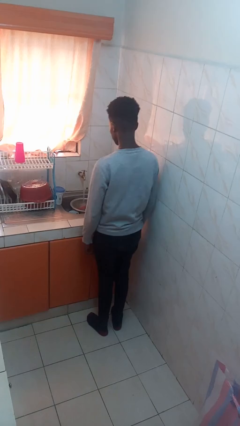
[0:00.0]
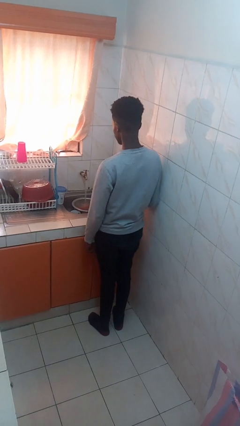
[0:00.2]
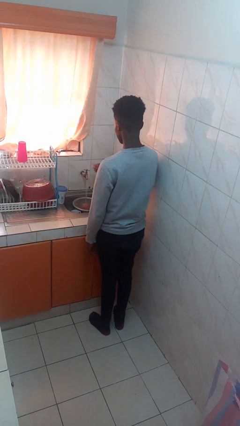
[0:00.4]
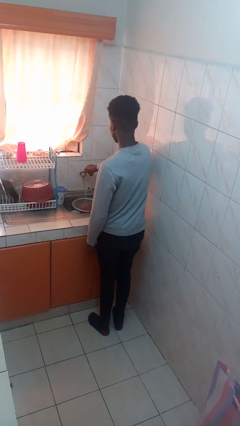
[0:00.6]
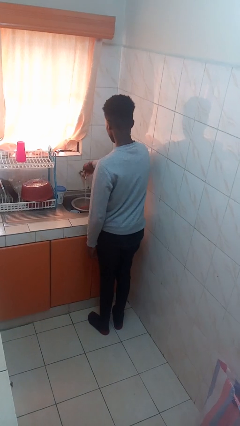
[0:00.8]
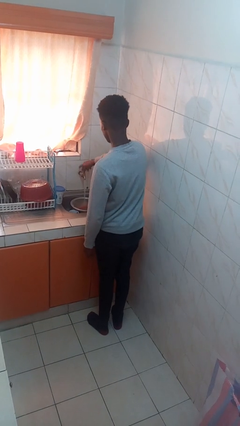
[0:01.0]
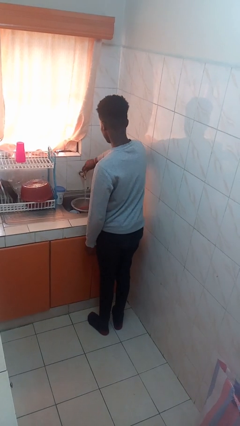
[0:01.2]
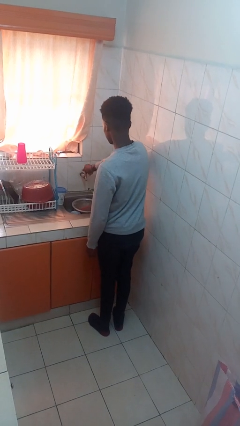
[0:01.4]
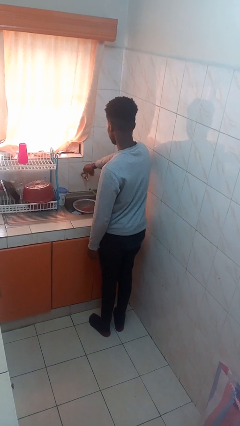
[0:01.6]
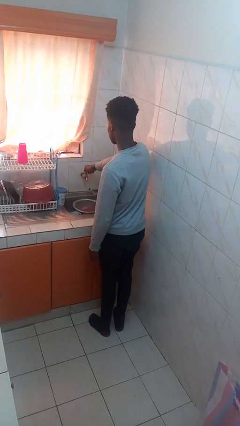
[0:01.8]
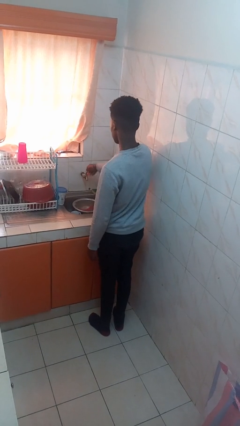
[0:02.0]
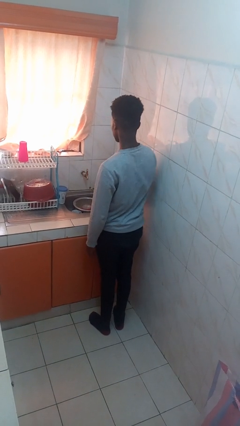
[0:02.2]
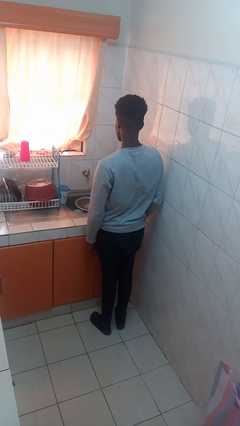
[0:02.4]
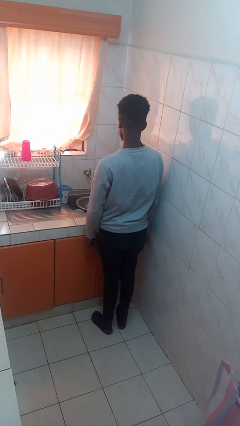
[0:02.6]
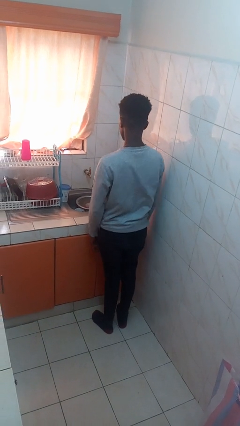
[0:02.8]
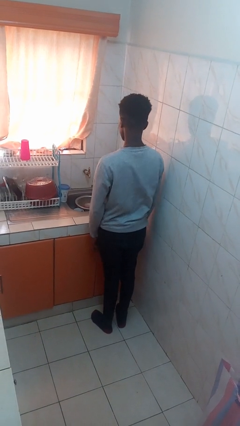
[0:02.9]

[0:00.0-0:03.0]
person turns off faucet

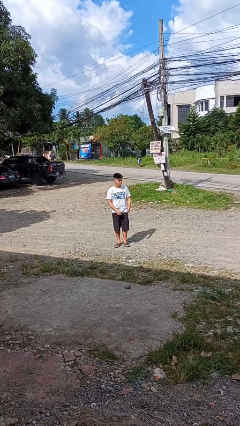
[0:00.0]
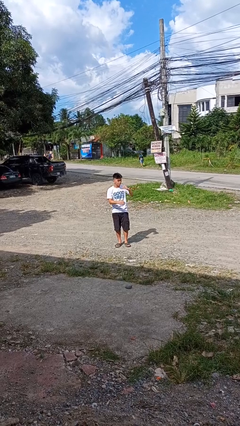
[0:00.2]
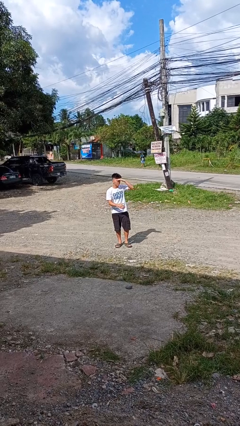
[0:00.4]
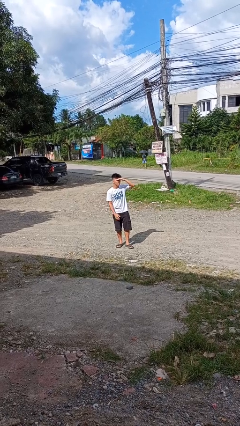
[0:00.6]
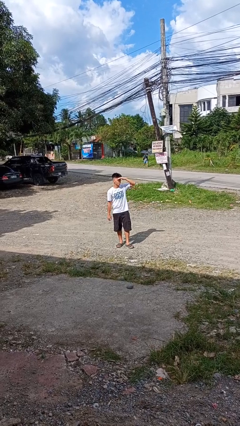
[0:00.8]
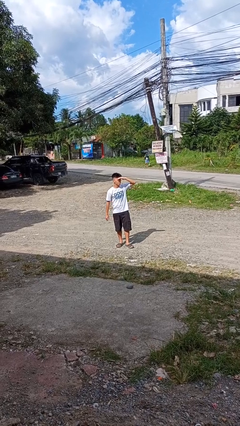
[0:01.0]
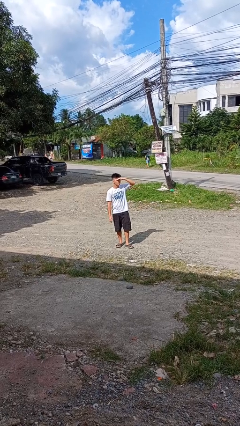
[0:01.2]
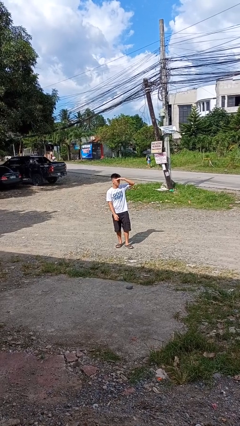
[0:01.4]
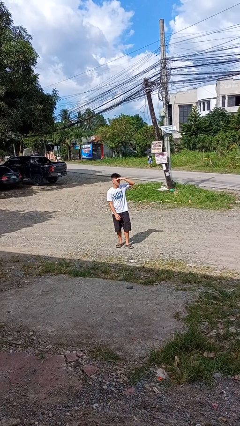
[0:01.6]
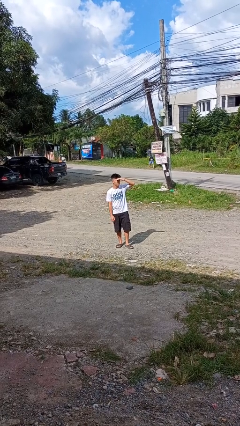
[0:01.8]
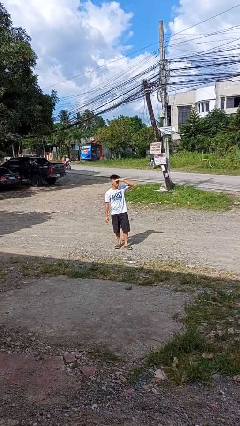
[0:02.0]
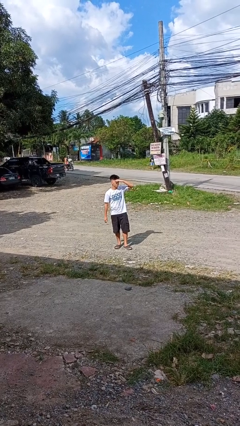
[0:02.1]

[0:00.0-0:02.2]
person shades eyes

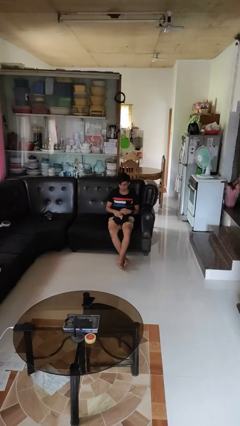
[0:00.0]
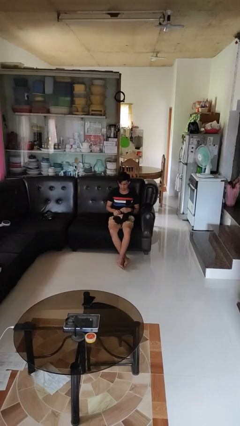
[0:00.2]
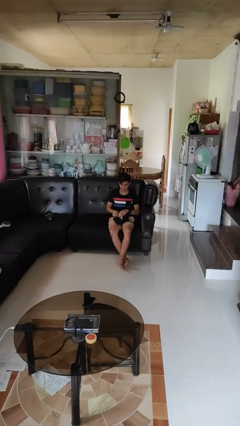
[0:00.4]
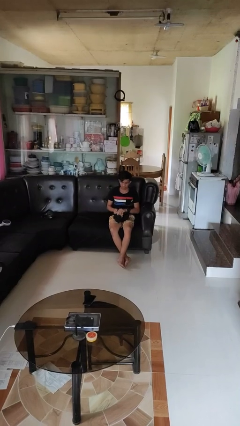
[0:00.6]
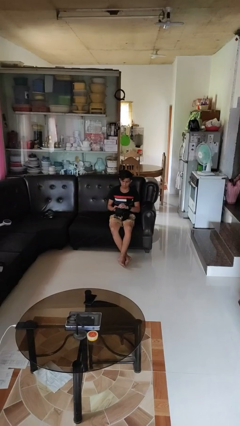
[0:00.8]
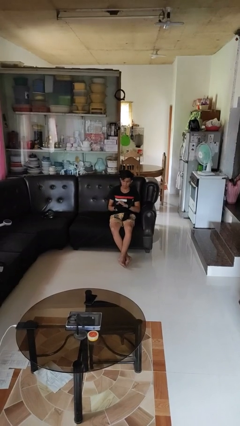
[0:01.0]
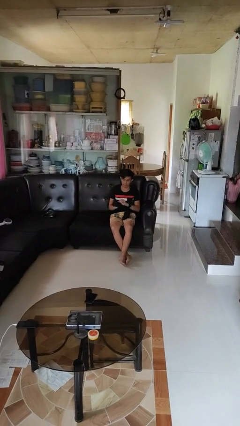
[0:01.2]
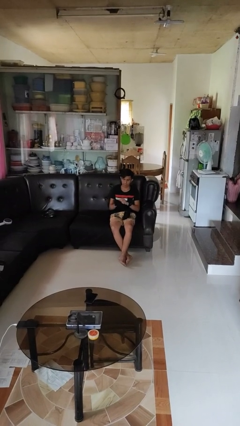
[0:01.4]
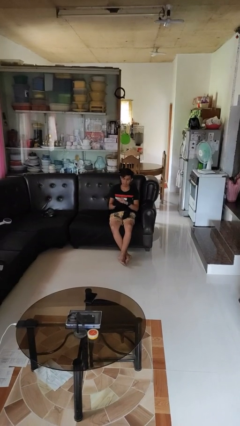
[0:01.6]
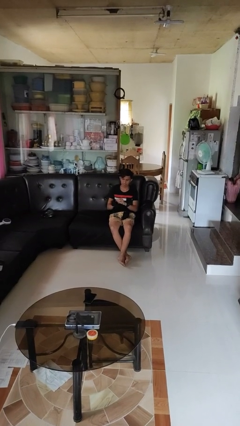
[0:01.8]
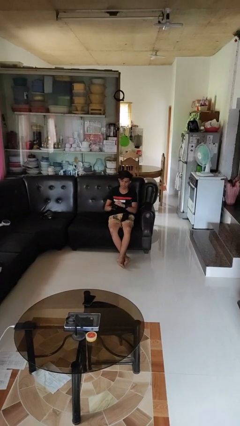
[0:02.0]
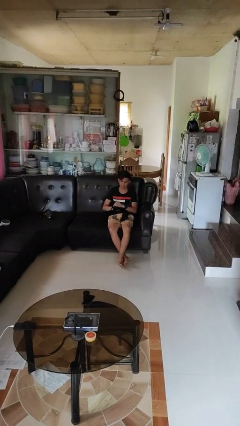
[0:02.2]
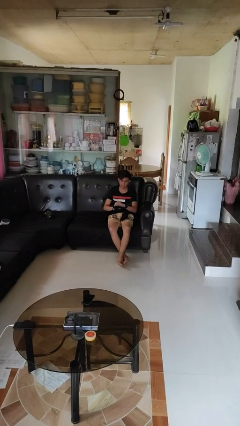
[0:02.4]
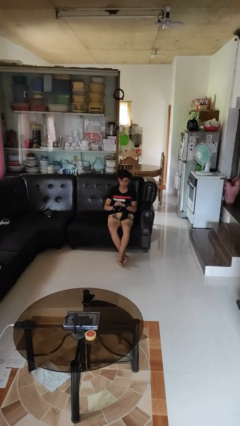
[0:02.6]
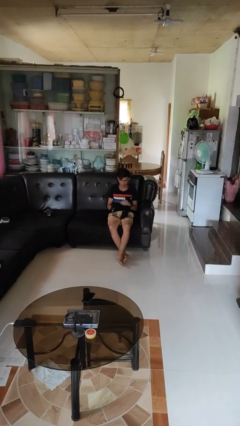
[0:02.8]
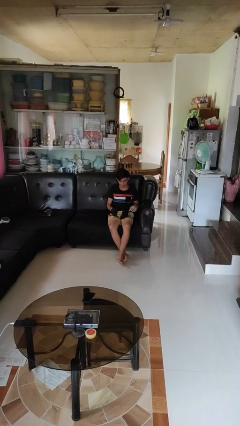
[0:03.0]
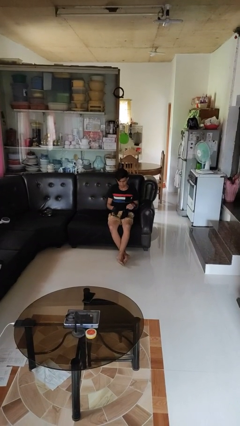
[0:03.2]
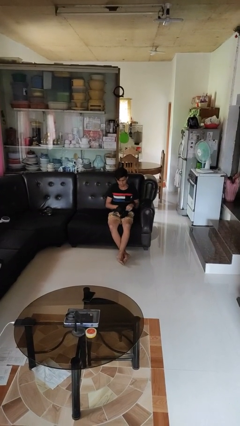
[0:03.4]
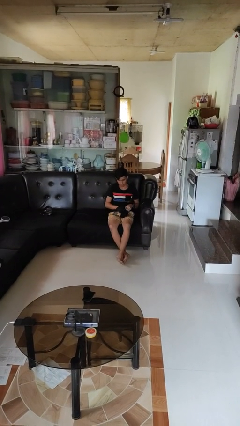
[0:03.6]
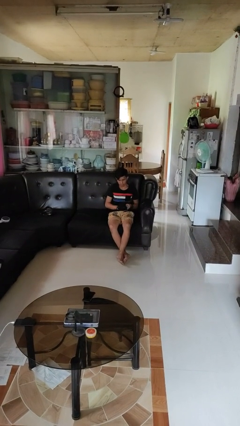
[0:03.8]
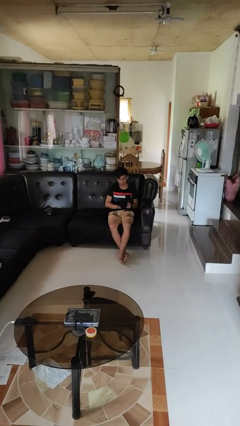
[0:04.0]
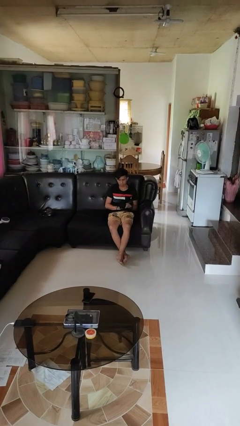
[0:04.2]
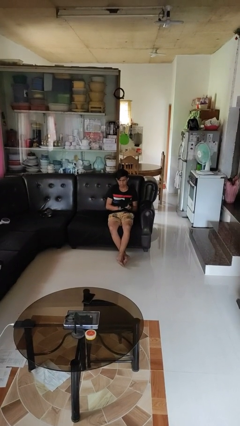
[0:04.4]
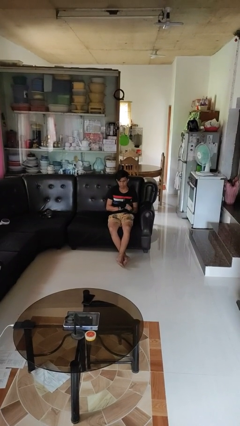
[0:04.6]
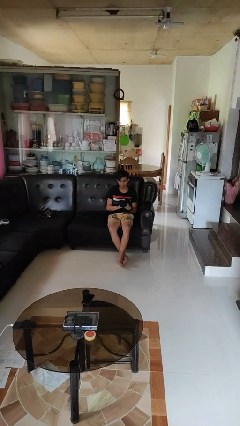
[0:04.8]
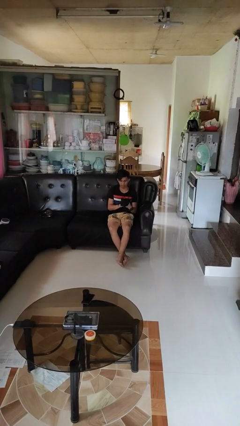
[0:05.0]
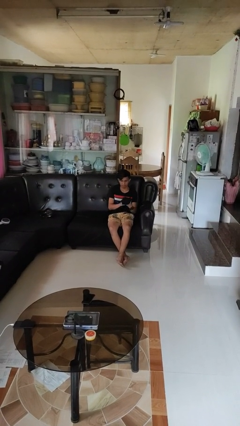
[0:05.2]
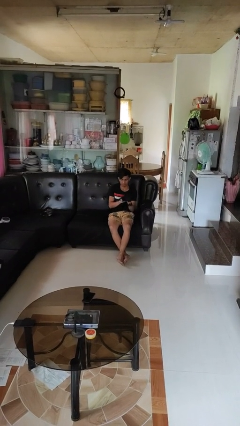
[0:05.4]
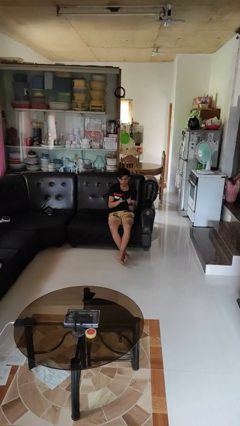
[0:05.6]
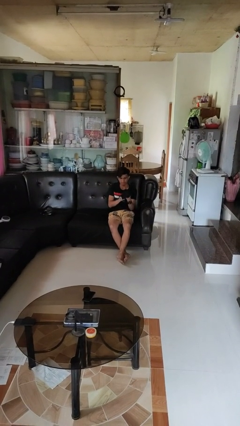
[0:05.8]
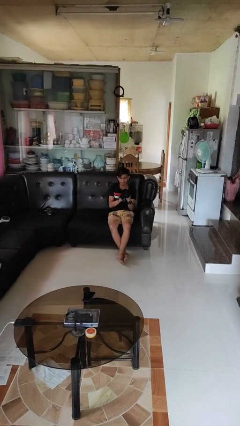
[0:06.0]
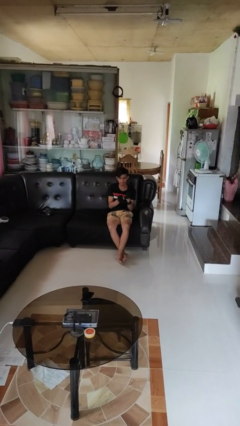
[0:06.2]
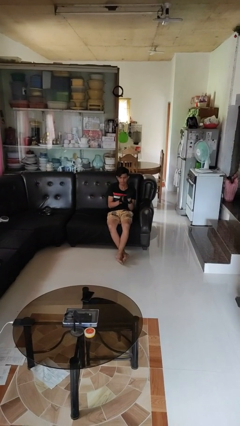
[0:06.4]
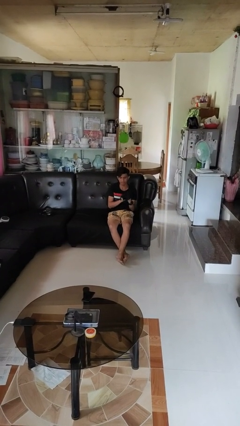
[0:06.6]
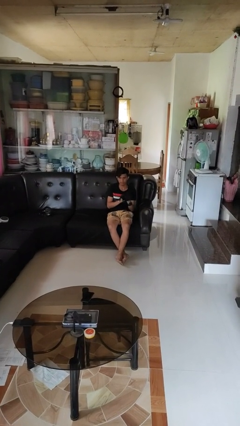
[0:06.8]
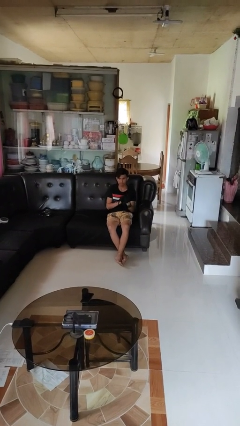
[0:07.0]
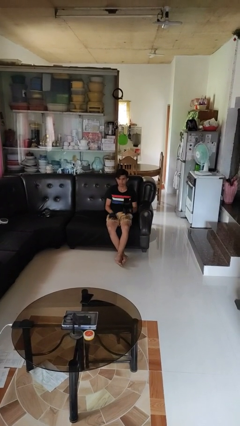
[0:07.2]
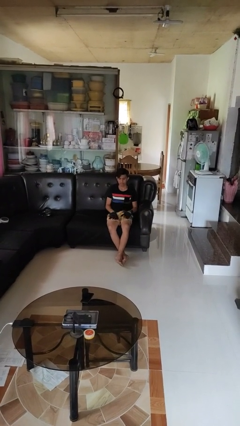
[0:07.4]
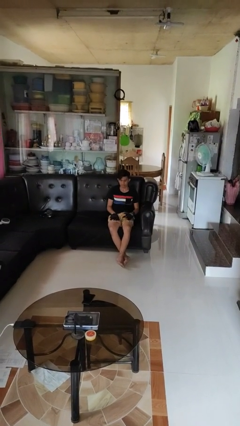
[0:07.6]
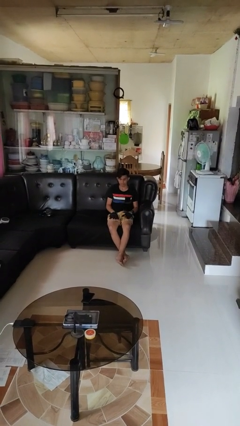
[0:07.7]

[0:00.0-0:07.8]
person puts on gloves

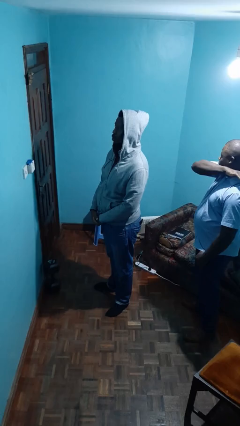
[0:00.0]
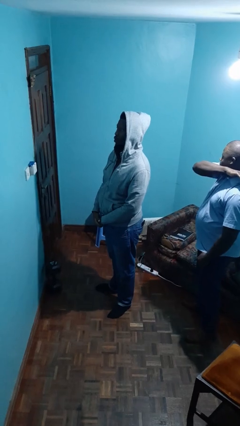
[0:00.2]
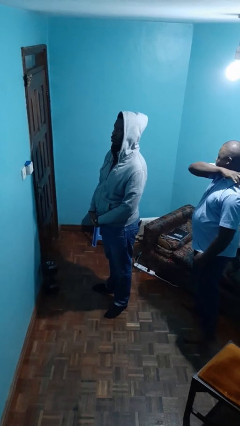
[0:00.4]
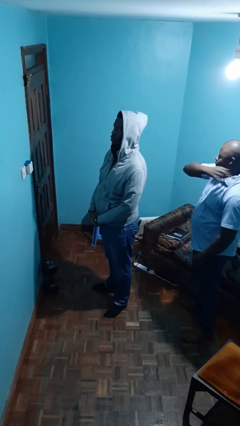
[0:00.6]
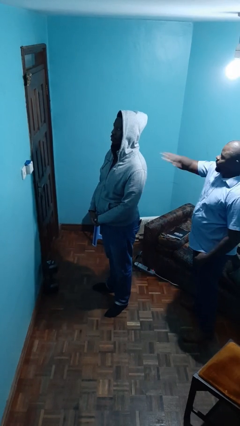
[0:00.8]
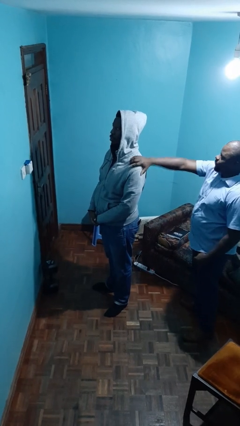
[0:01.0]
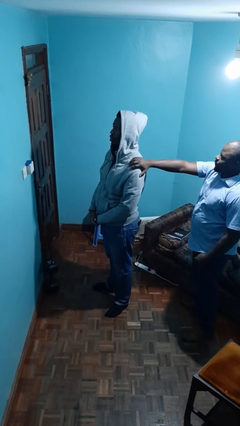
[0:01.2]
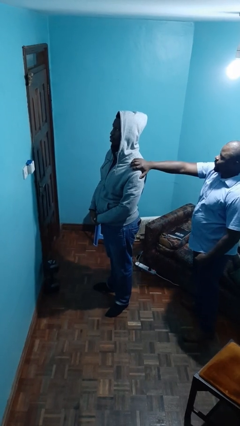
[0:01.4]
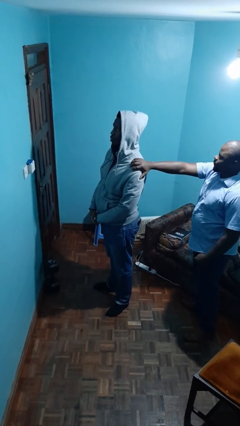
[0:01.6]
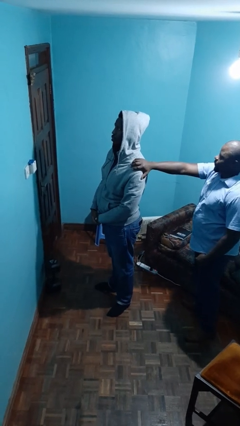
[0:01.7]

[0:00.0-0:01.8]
person grabs person by shoulder

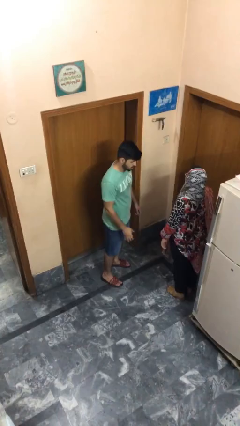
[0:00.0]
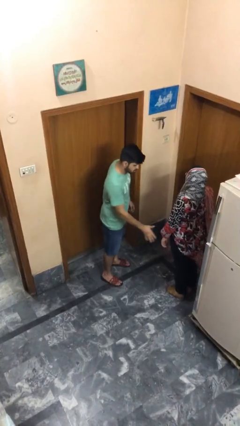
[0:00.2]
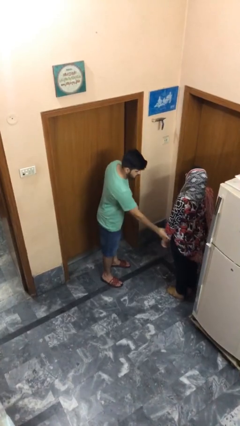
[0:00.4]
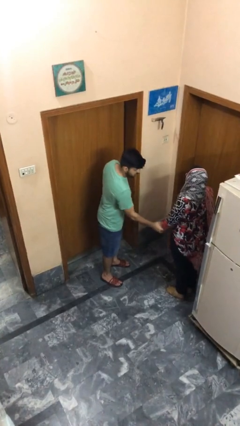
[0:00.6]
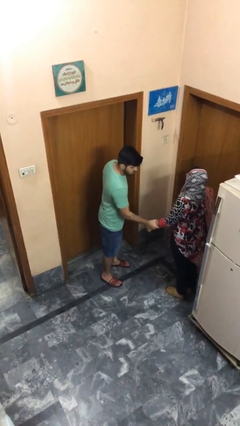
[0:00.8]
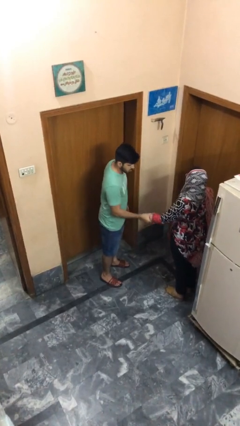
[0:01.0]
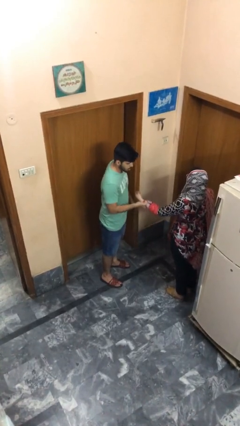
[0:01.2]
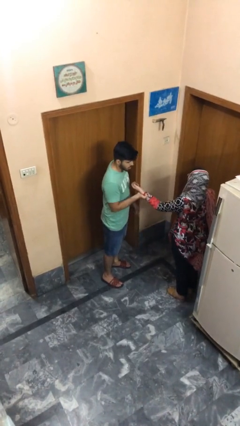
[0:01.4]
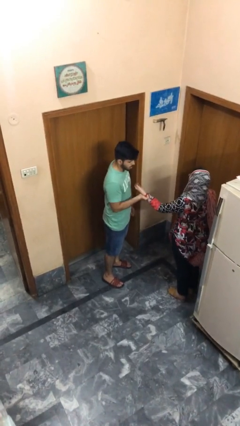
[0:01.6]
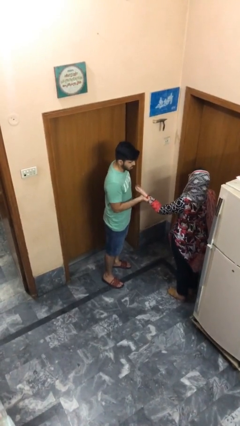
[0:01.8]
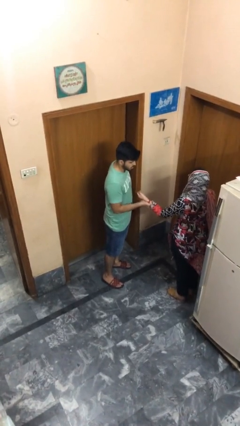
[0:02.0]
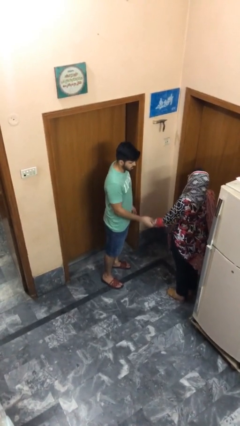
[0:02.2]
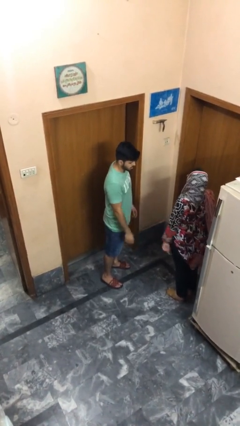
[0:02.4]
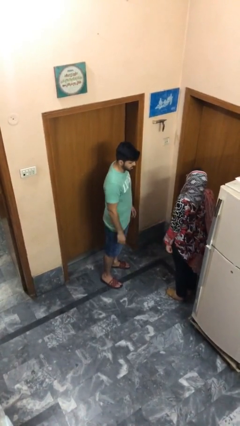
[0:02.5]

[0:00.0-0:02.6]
person grabs person by forearm
